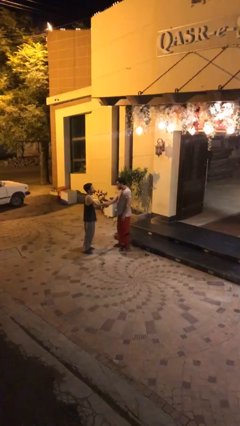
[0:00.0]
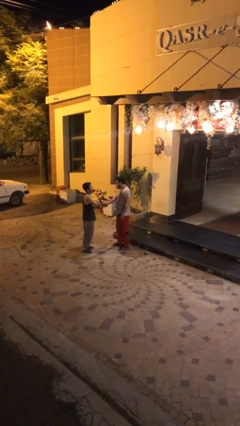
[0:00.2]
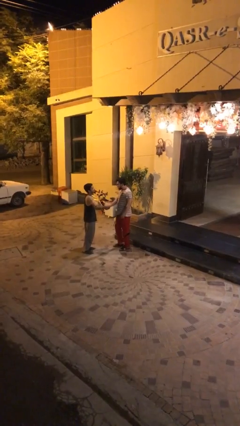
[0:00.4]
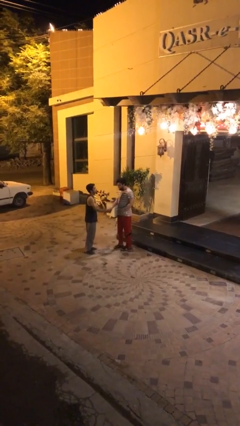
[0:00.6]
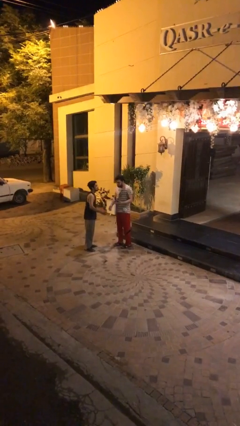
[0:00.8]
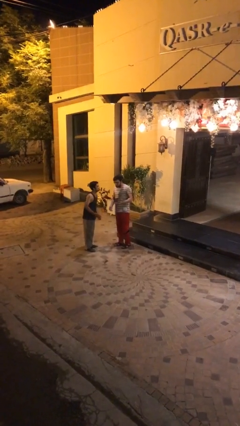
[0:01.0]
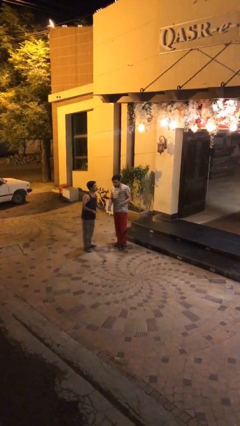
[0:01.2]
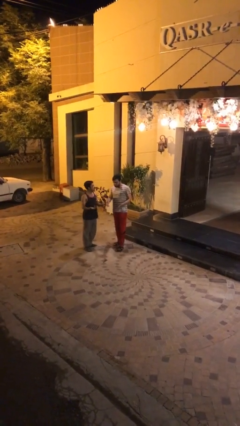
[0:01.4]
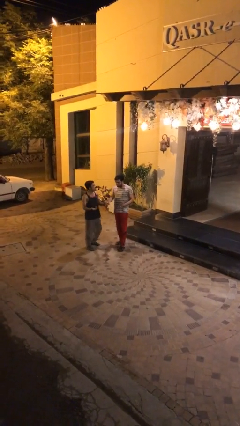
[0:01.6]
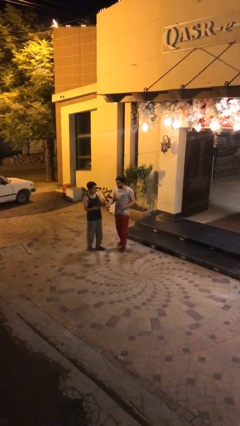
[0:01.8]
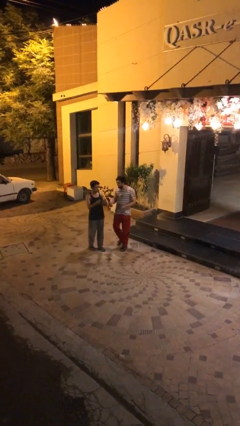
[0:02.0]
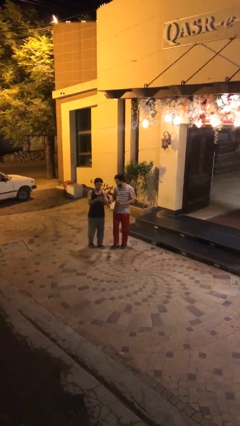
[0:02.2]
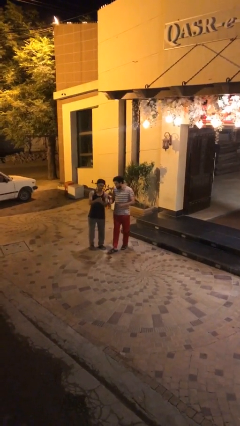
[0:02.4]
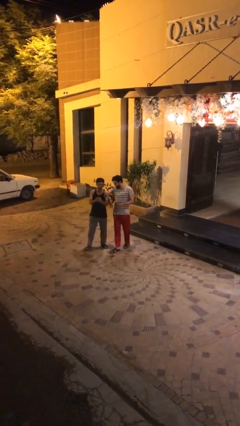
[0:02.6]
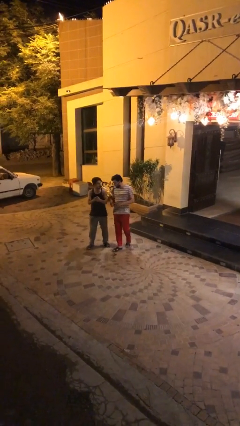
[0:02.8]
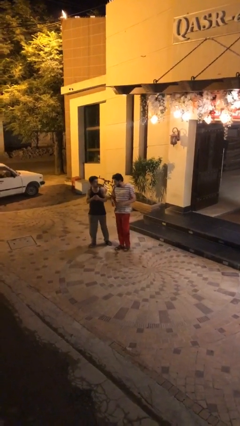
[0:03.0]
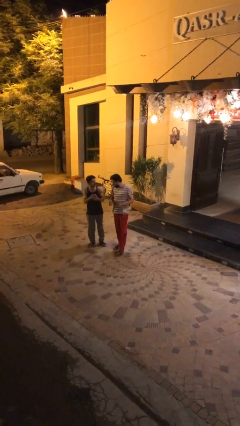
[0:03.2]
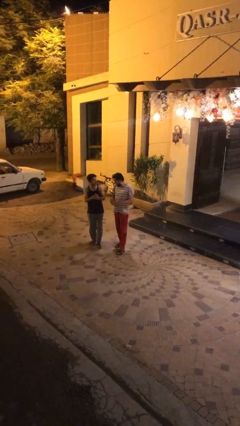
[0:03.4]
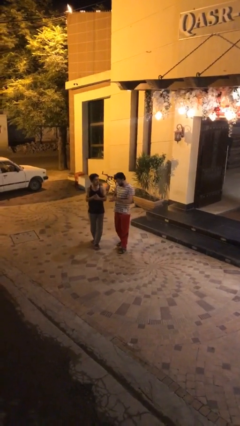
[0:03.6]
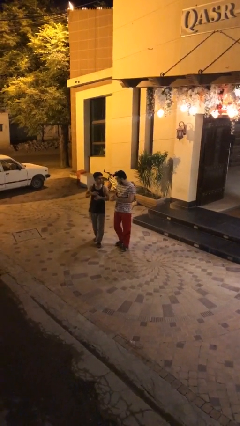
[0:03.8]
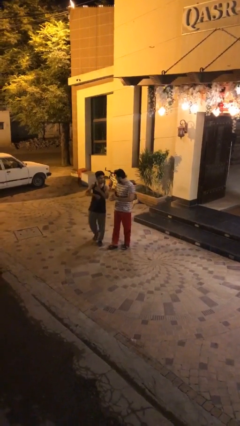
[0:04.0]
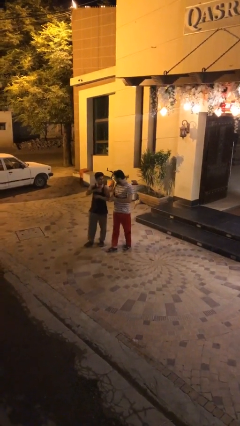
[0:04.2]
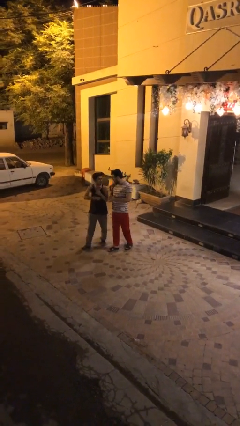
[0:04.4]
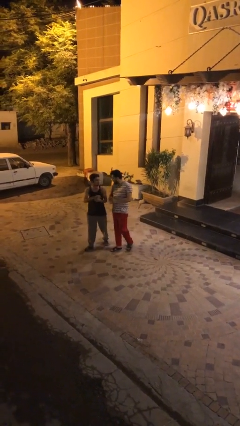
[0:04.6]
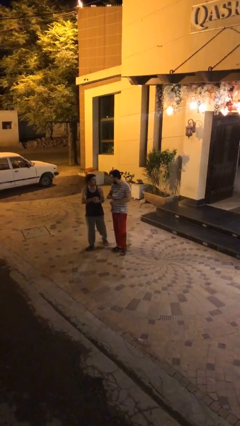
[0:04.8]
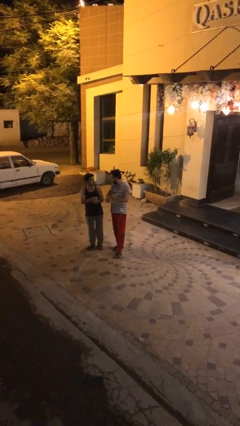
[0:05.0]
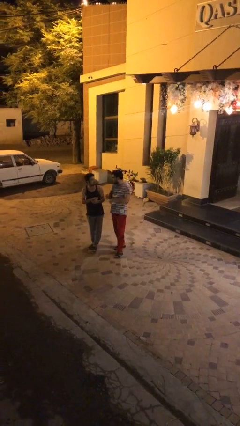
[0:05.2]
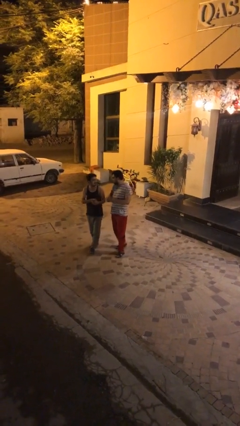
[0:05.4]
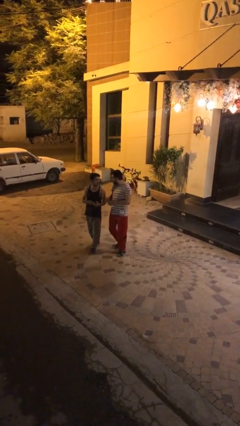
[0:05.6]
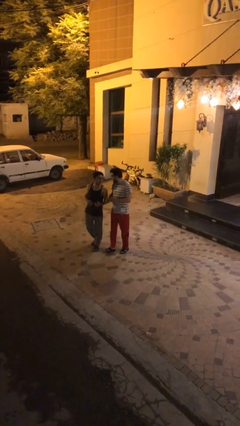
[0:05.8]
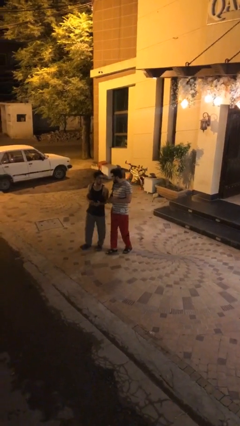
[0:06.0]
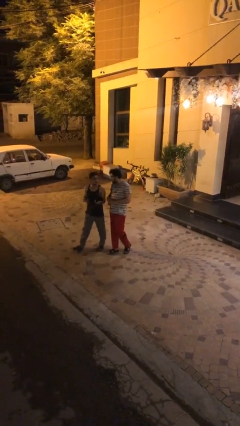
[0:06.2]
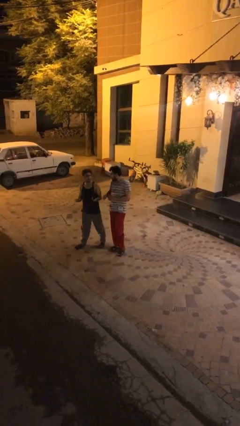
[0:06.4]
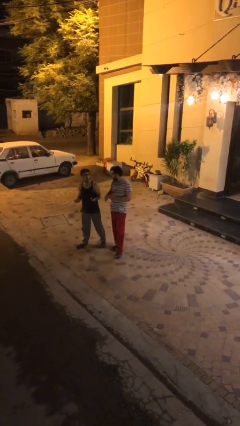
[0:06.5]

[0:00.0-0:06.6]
person talks to person

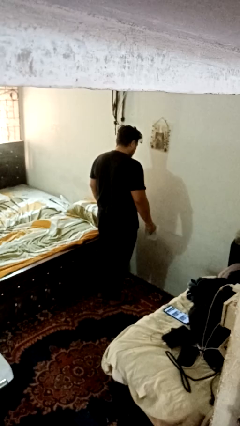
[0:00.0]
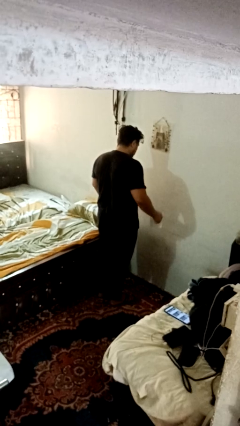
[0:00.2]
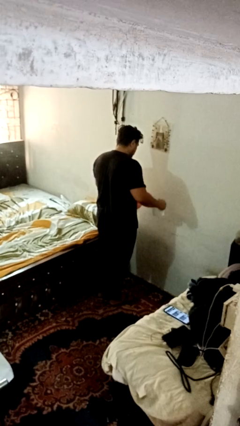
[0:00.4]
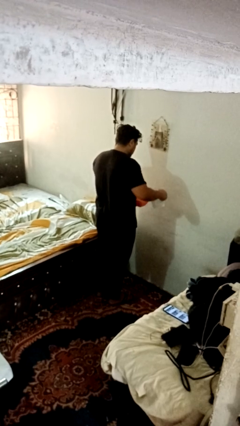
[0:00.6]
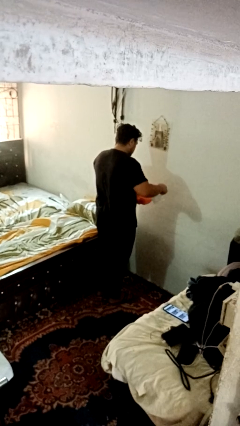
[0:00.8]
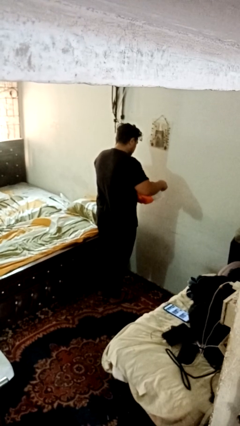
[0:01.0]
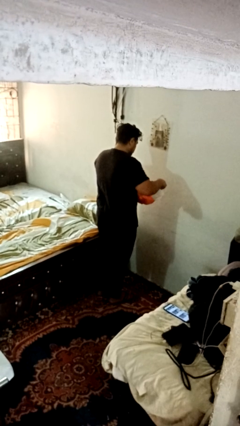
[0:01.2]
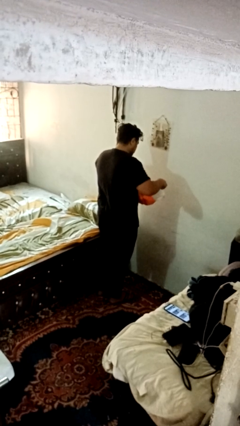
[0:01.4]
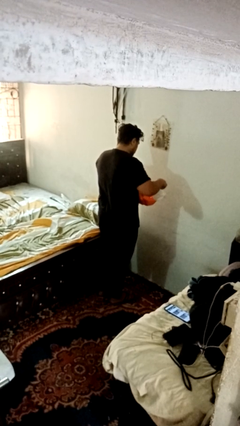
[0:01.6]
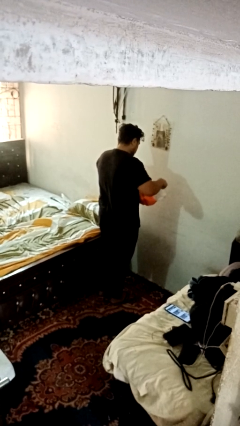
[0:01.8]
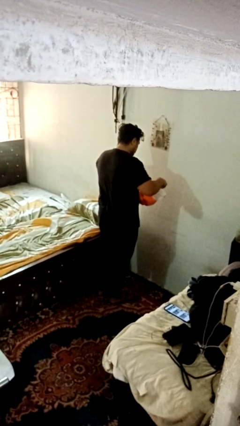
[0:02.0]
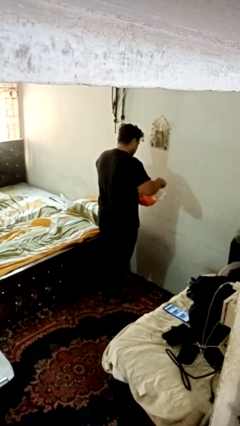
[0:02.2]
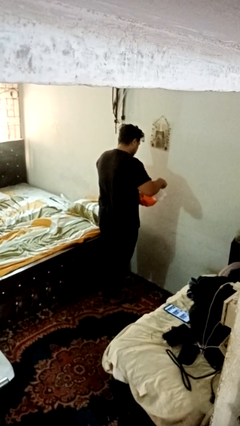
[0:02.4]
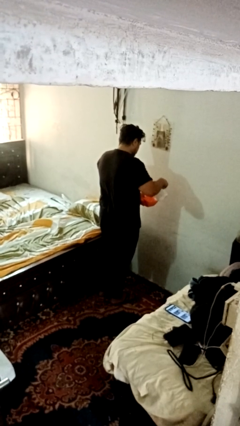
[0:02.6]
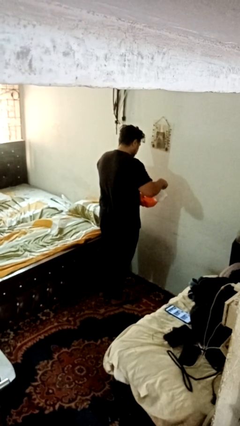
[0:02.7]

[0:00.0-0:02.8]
person pours into bowl

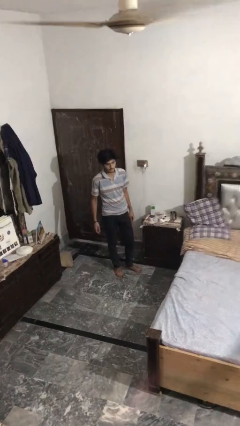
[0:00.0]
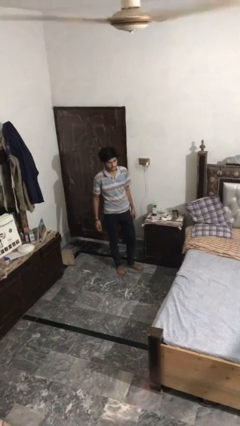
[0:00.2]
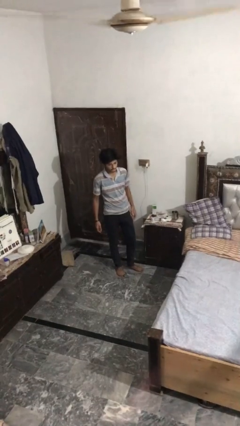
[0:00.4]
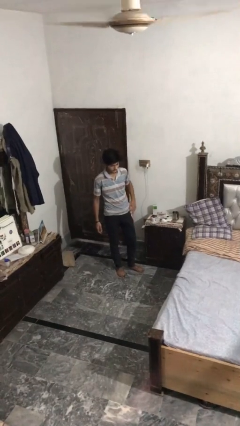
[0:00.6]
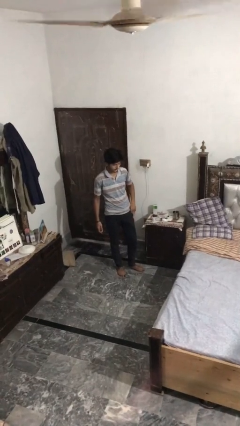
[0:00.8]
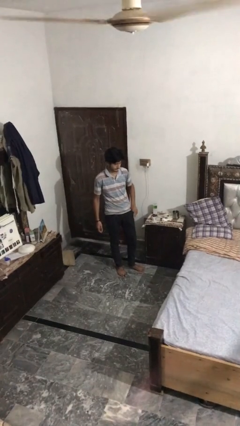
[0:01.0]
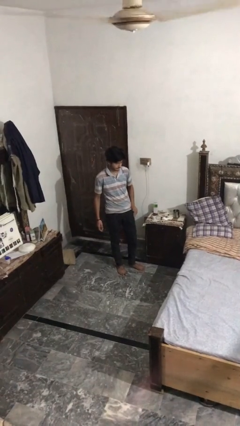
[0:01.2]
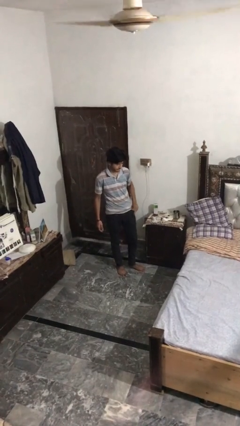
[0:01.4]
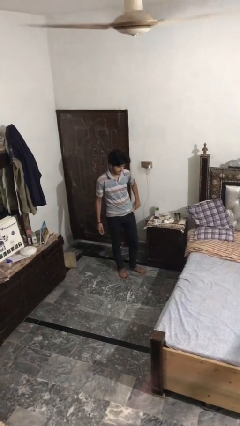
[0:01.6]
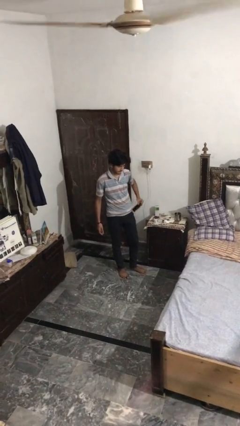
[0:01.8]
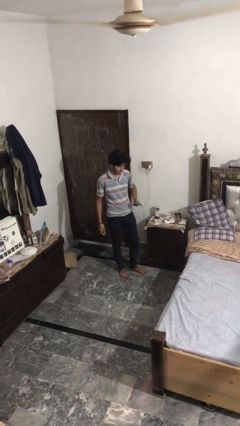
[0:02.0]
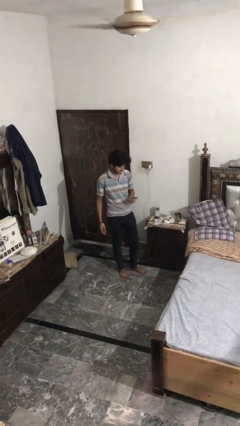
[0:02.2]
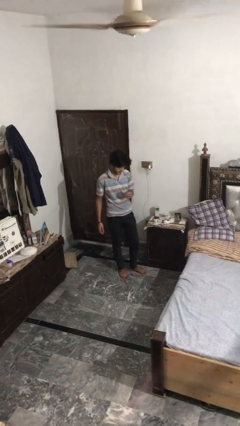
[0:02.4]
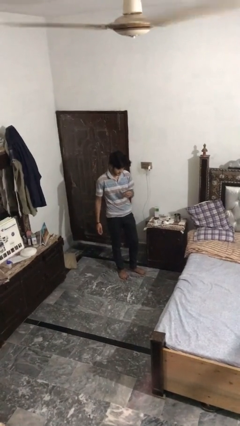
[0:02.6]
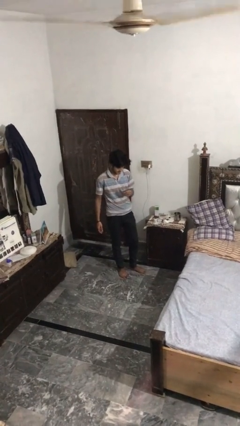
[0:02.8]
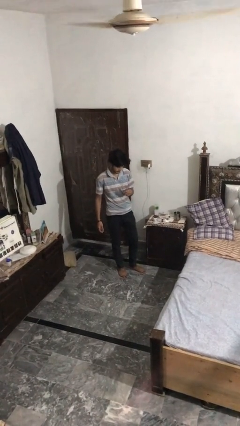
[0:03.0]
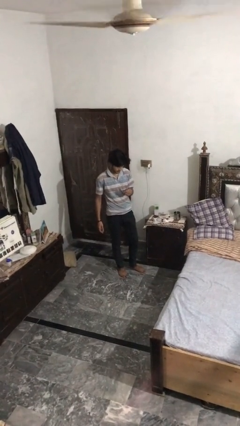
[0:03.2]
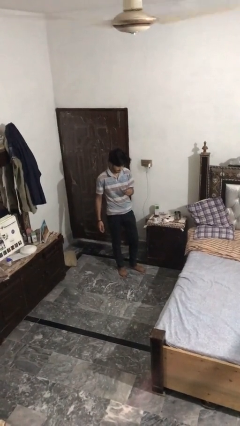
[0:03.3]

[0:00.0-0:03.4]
person takes phone from pocket

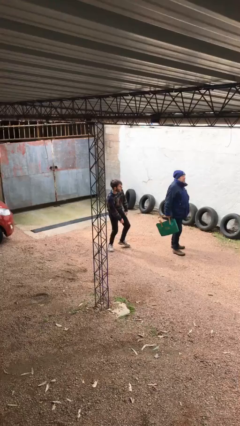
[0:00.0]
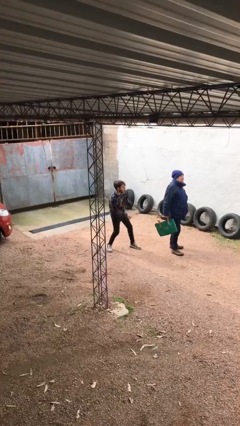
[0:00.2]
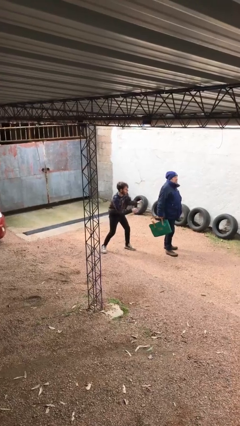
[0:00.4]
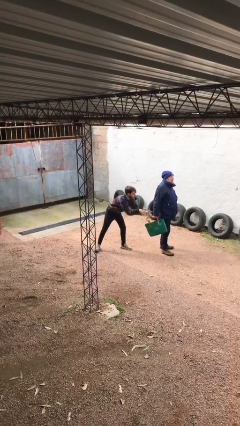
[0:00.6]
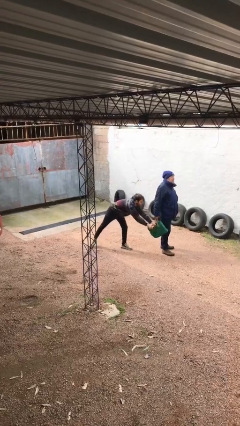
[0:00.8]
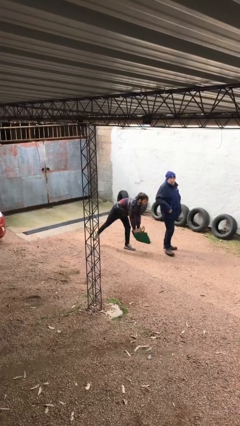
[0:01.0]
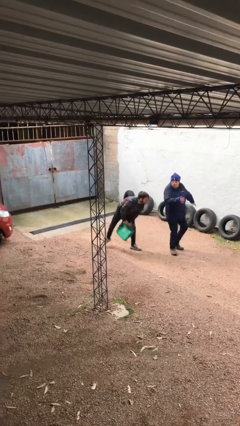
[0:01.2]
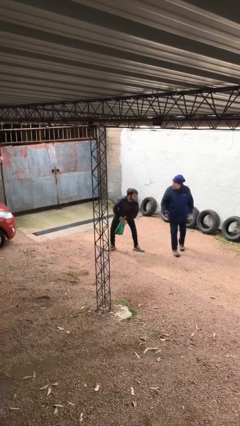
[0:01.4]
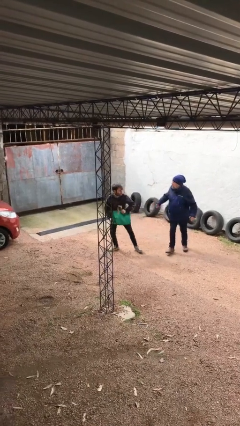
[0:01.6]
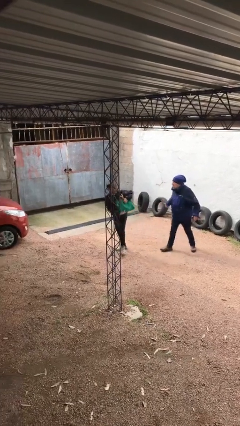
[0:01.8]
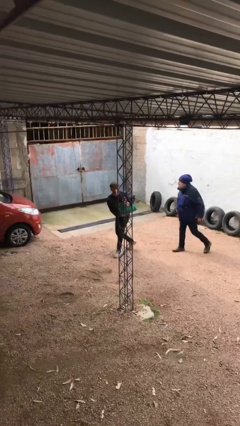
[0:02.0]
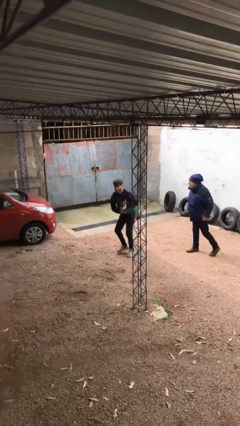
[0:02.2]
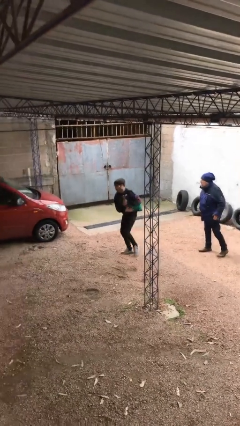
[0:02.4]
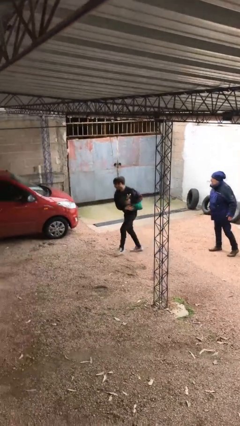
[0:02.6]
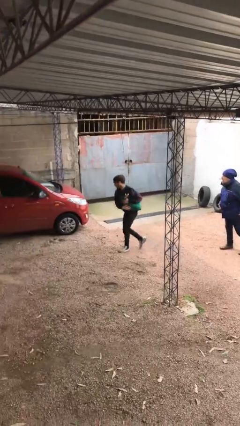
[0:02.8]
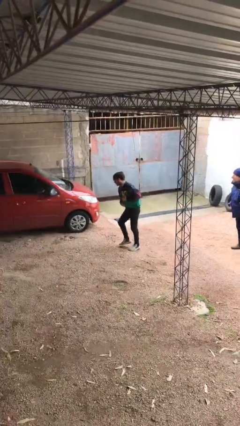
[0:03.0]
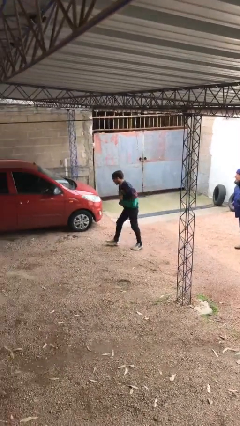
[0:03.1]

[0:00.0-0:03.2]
person steals object from person

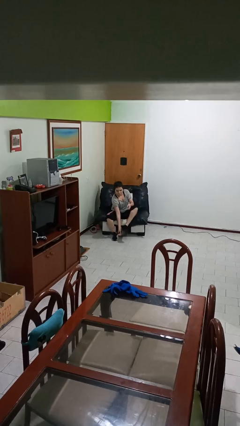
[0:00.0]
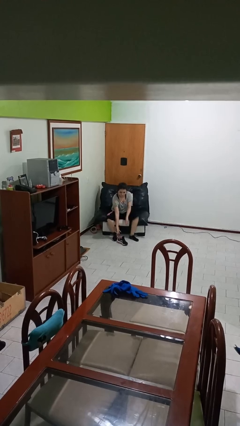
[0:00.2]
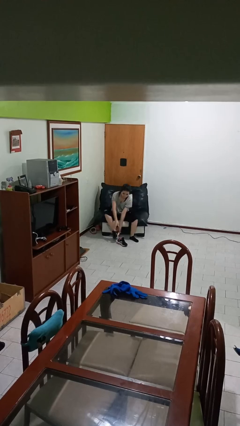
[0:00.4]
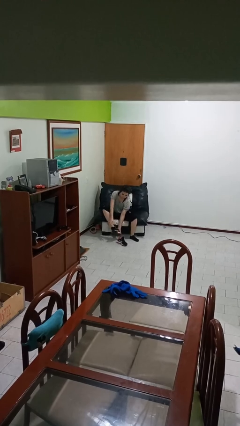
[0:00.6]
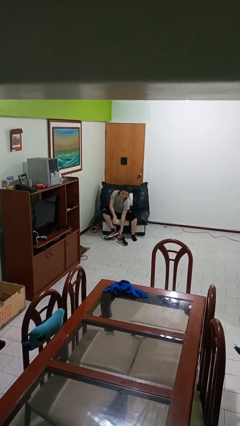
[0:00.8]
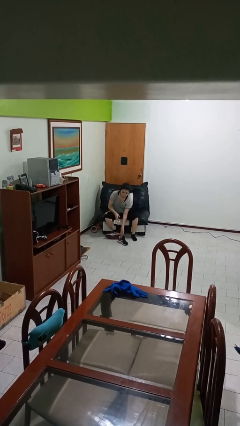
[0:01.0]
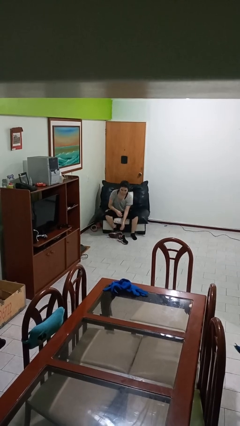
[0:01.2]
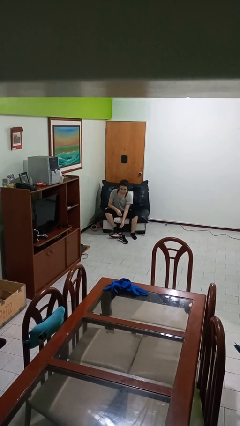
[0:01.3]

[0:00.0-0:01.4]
person takes off shoes
